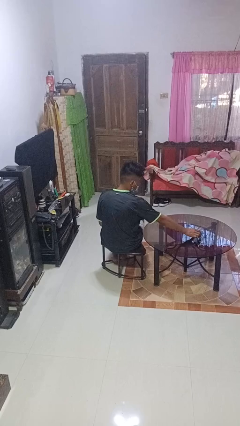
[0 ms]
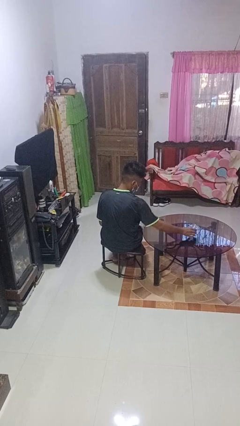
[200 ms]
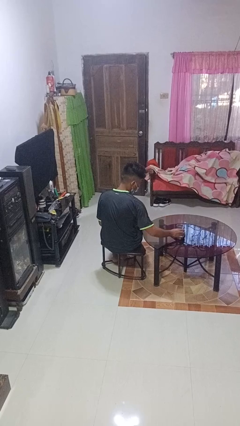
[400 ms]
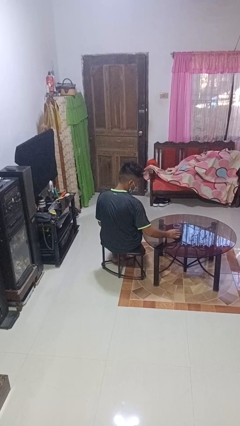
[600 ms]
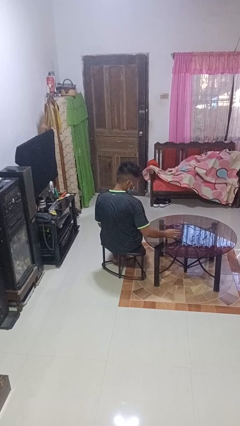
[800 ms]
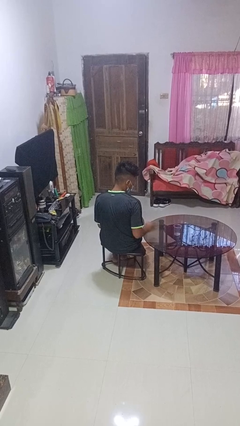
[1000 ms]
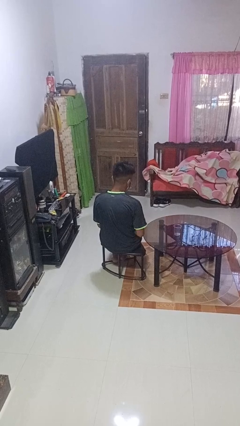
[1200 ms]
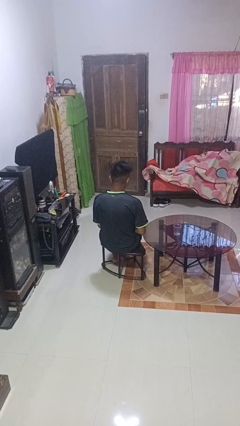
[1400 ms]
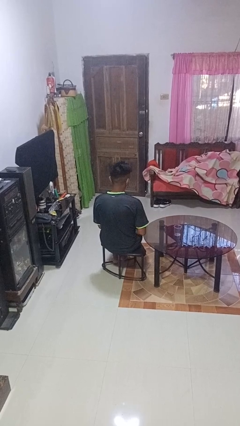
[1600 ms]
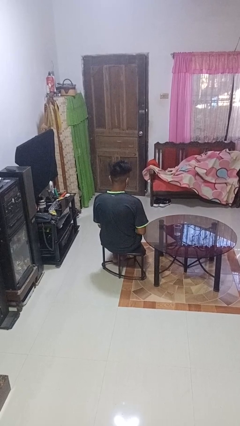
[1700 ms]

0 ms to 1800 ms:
person sets upright glass

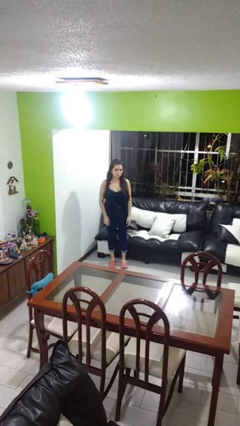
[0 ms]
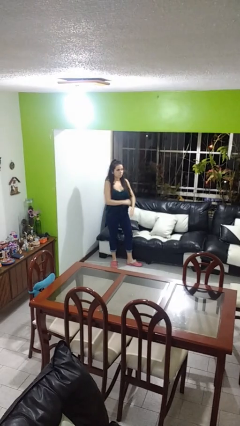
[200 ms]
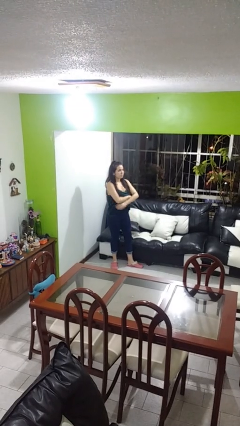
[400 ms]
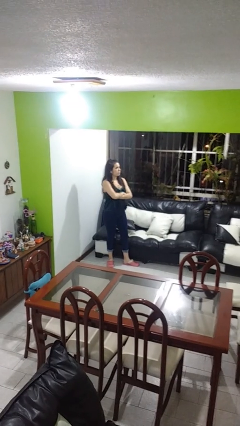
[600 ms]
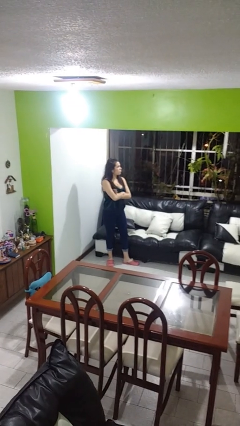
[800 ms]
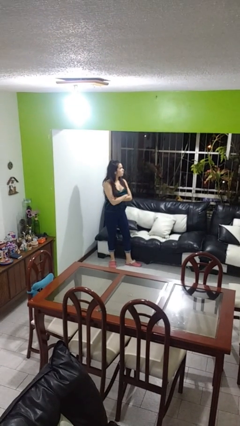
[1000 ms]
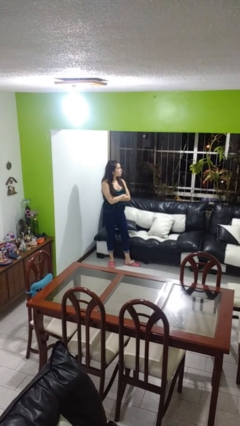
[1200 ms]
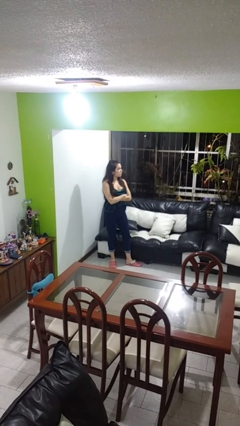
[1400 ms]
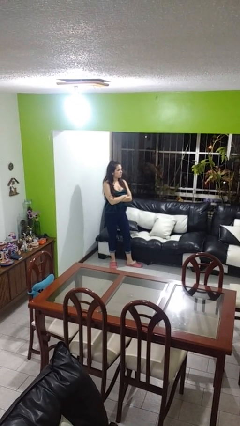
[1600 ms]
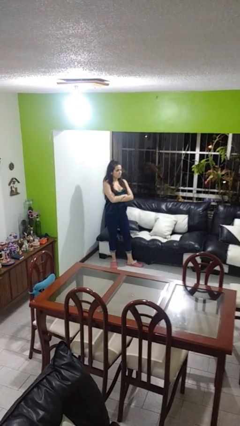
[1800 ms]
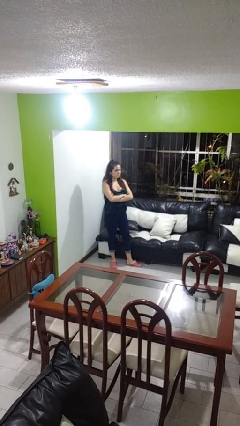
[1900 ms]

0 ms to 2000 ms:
person crosses arms

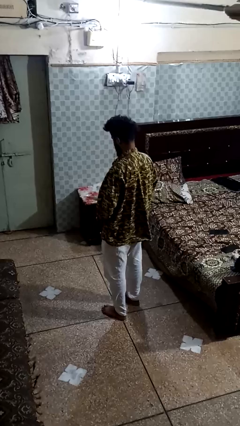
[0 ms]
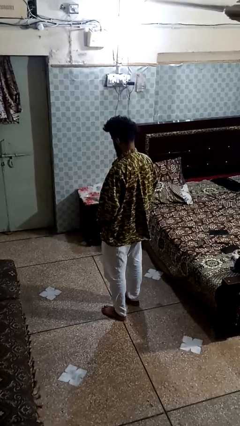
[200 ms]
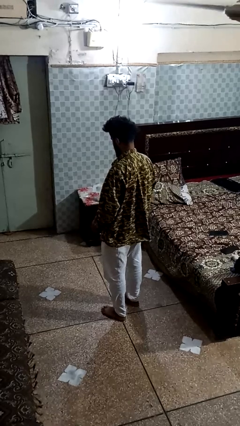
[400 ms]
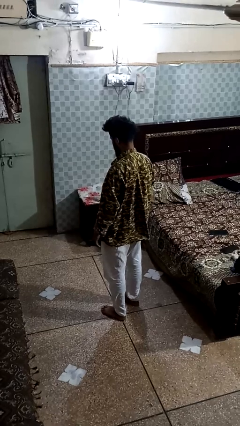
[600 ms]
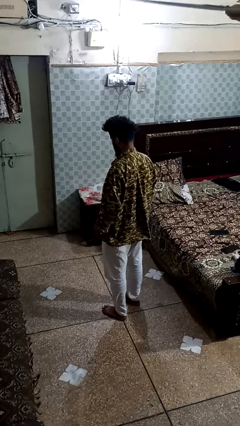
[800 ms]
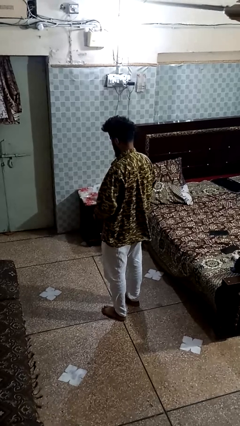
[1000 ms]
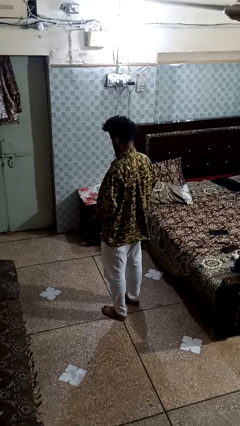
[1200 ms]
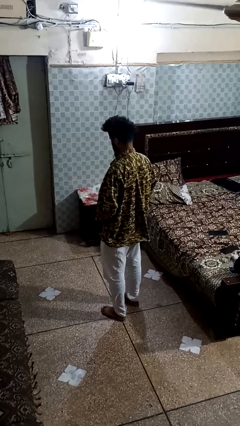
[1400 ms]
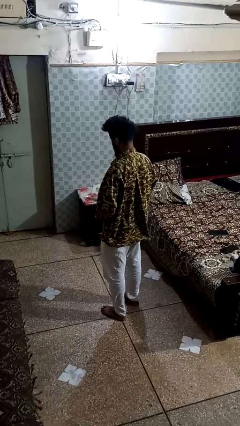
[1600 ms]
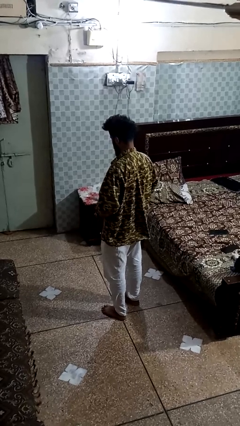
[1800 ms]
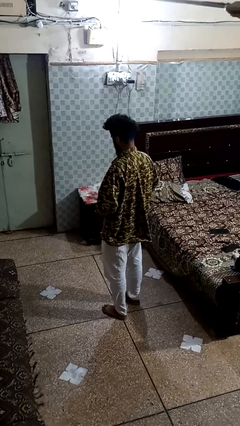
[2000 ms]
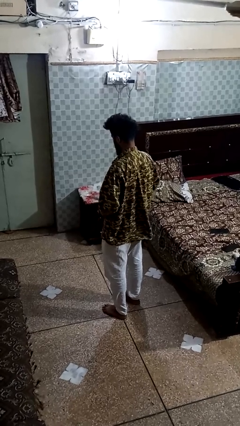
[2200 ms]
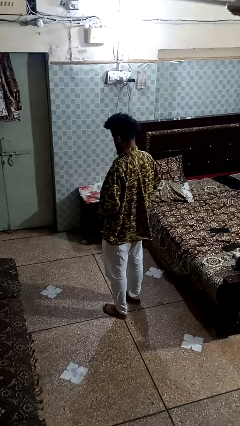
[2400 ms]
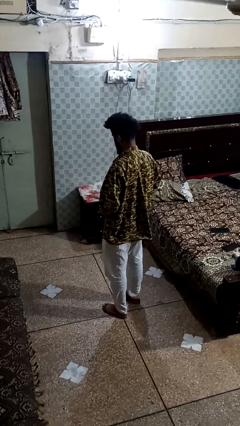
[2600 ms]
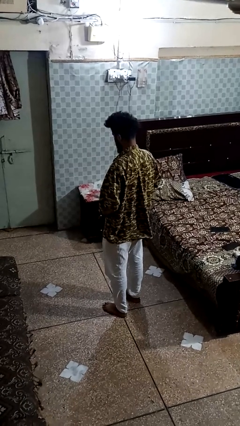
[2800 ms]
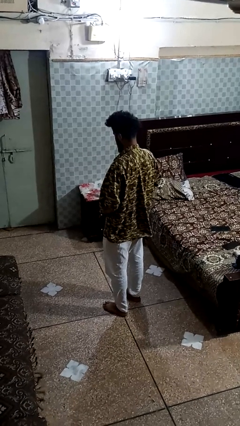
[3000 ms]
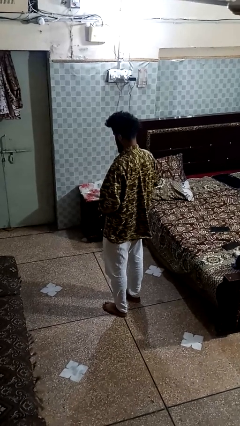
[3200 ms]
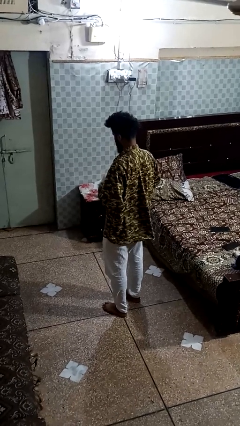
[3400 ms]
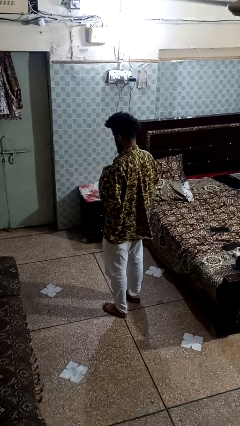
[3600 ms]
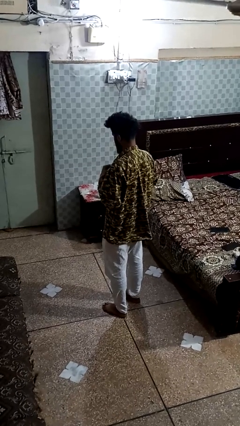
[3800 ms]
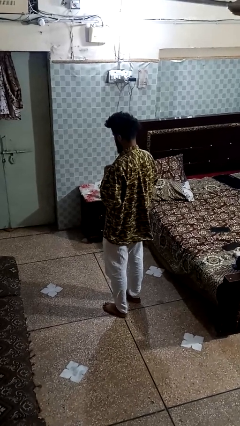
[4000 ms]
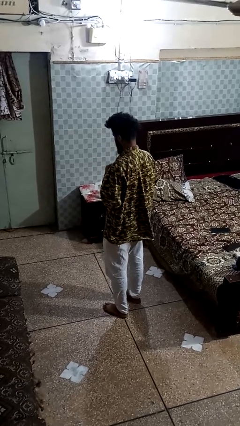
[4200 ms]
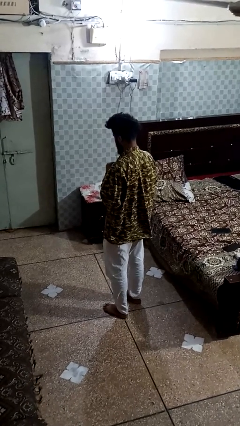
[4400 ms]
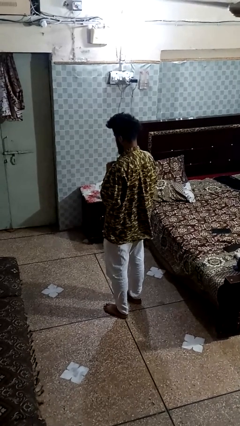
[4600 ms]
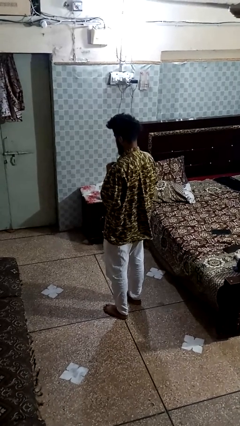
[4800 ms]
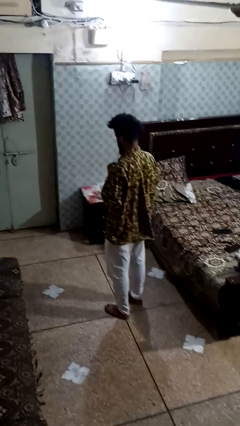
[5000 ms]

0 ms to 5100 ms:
person buttons shirt

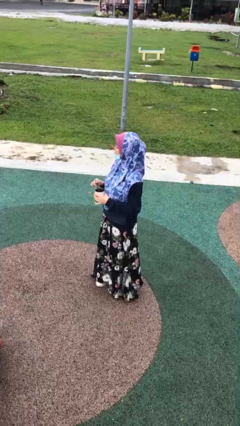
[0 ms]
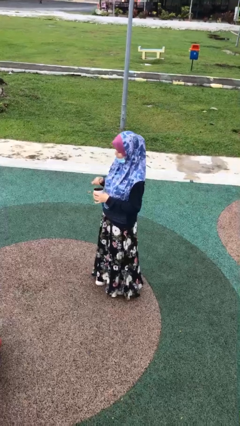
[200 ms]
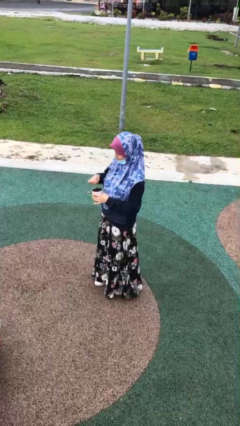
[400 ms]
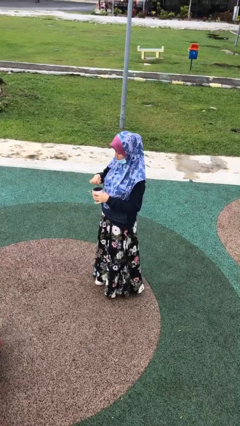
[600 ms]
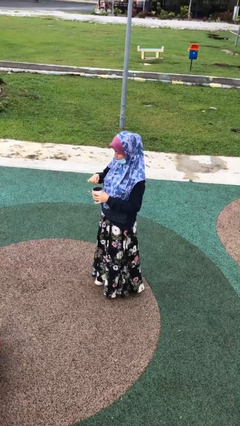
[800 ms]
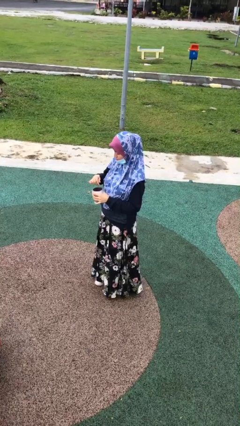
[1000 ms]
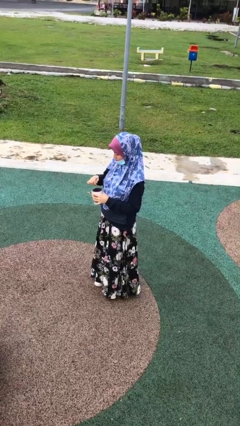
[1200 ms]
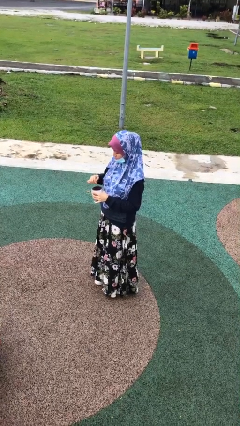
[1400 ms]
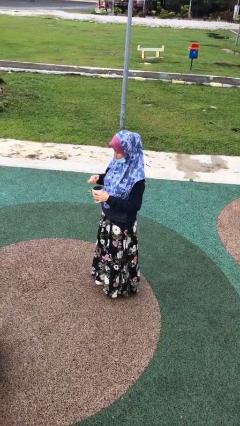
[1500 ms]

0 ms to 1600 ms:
person stirs mug

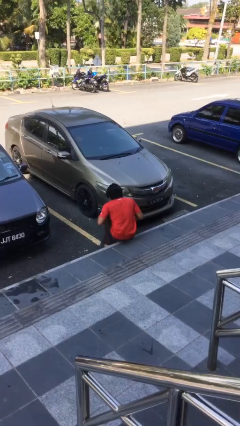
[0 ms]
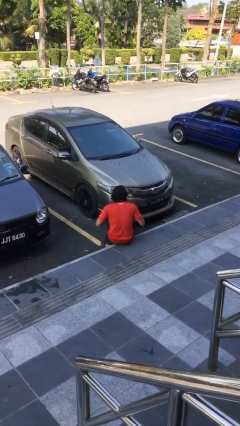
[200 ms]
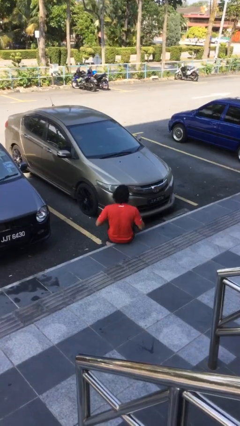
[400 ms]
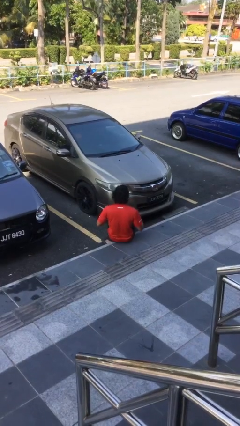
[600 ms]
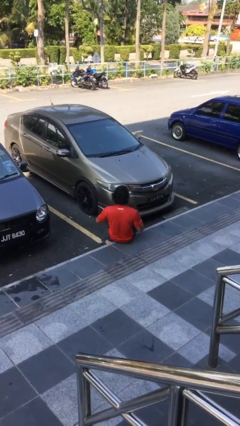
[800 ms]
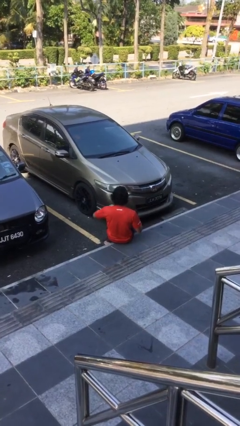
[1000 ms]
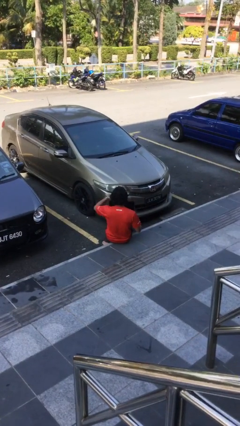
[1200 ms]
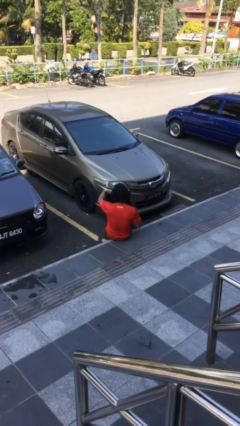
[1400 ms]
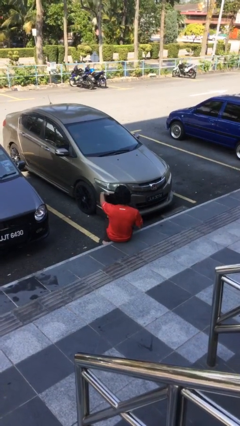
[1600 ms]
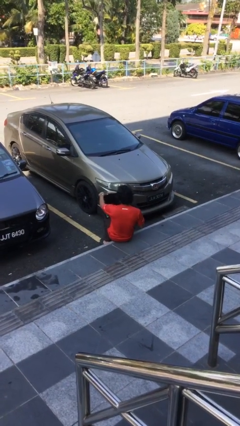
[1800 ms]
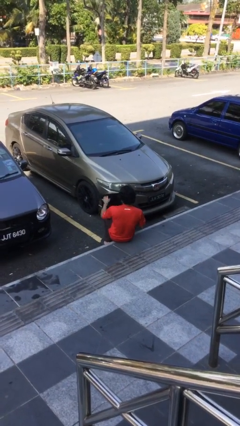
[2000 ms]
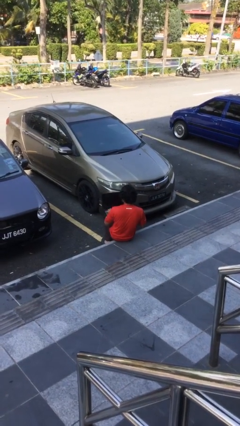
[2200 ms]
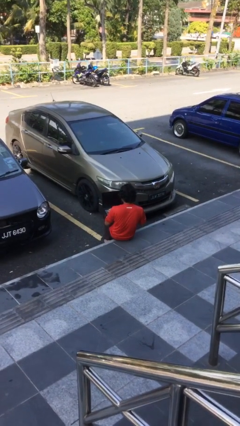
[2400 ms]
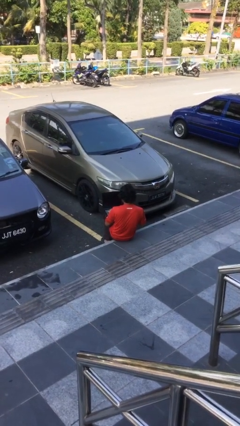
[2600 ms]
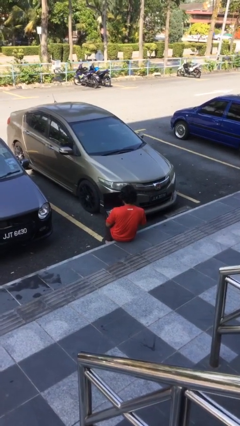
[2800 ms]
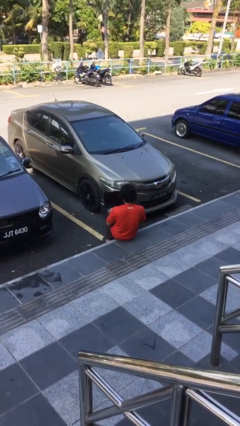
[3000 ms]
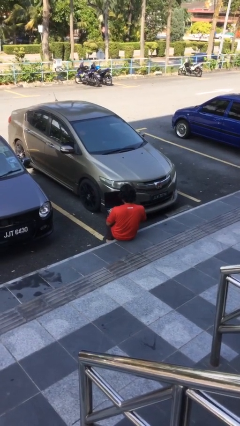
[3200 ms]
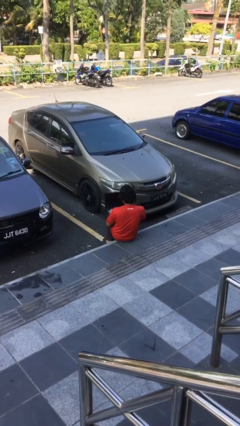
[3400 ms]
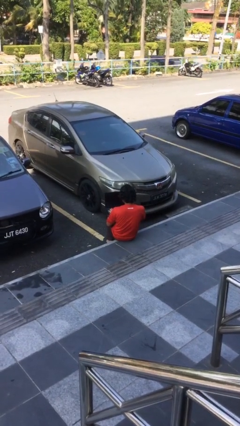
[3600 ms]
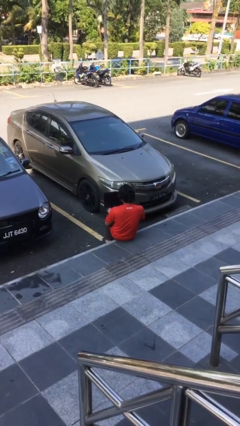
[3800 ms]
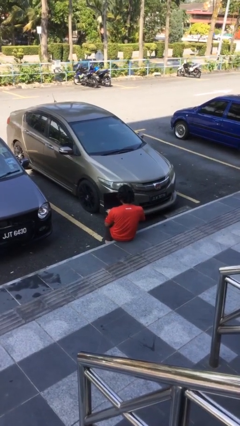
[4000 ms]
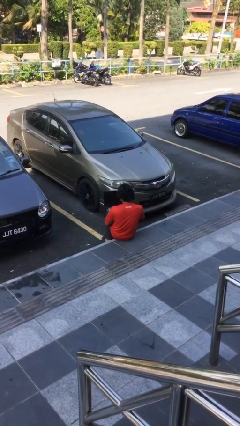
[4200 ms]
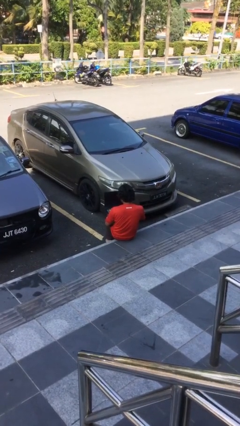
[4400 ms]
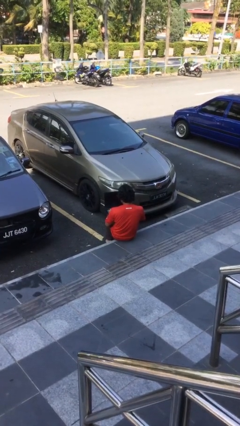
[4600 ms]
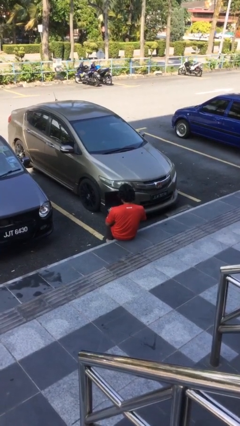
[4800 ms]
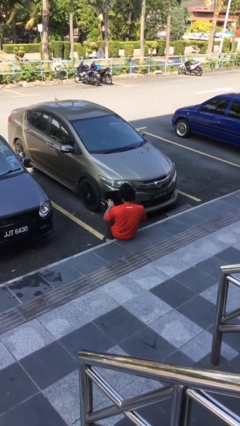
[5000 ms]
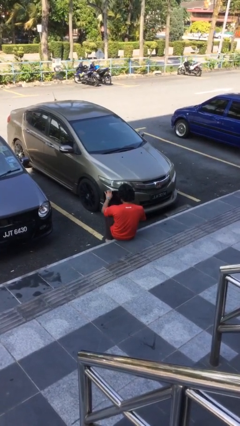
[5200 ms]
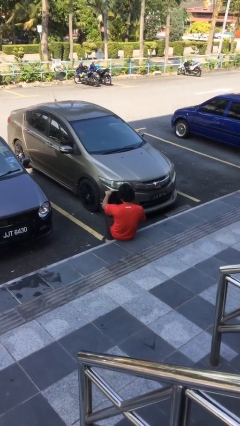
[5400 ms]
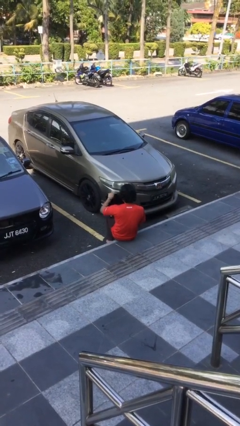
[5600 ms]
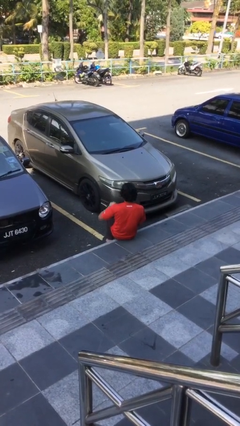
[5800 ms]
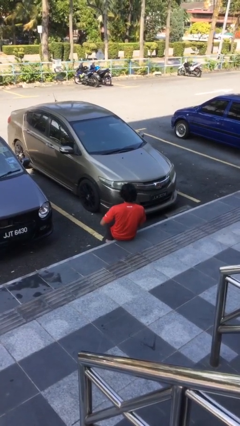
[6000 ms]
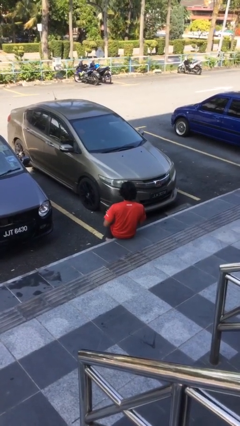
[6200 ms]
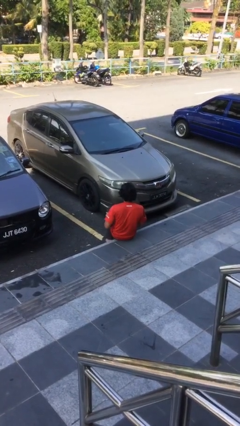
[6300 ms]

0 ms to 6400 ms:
person interacts with laptop

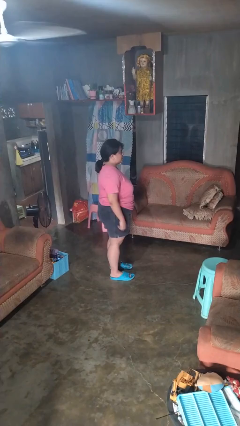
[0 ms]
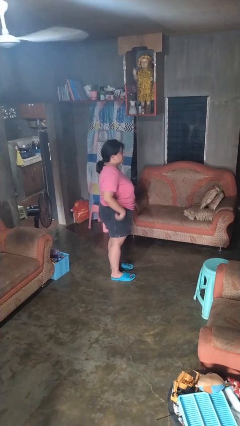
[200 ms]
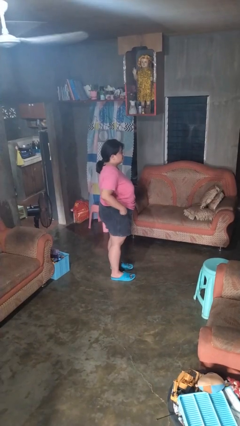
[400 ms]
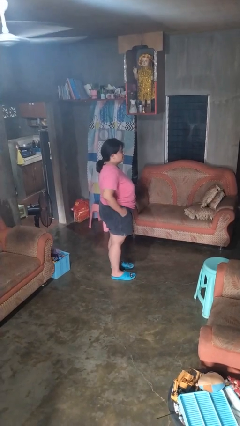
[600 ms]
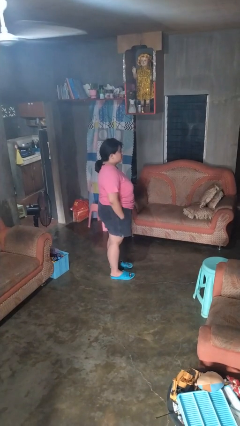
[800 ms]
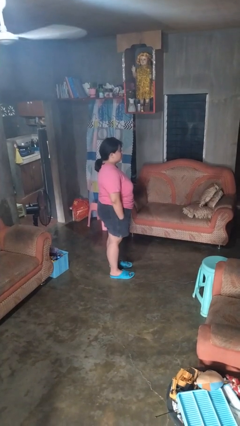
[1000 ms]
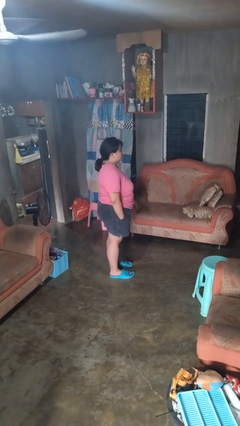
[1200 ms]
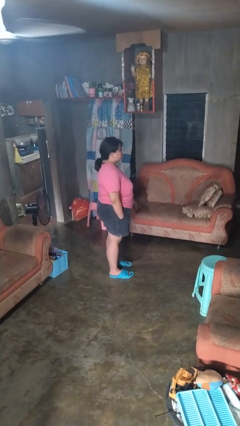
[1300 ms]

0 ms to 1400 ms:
person puts hands in back pockets
